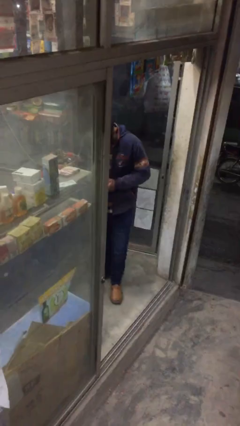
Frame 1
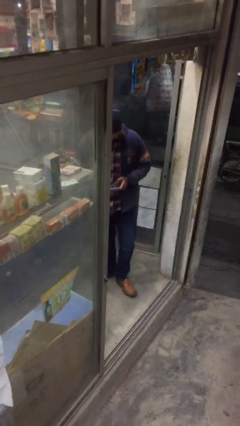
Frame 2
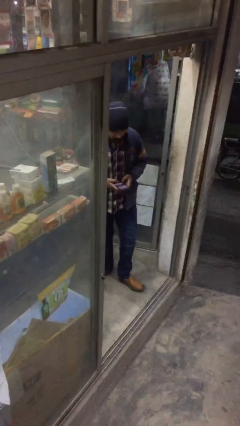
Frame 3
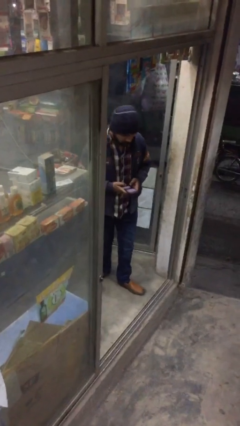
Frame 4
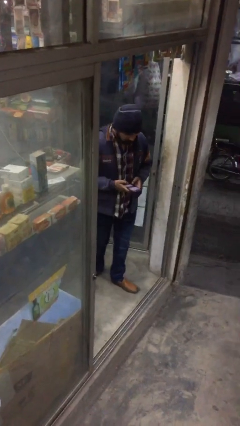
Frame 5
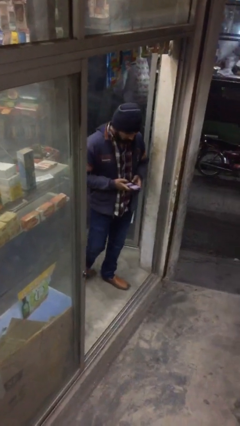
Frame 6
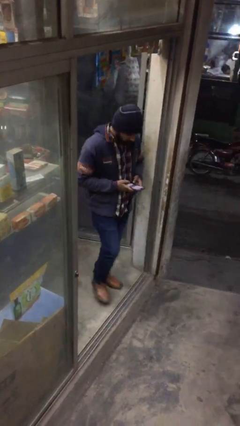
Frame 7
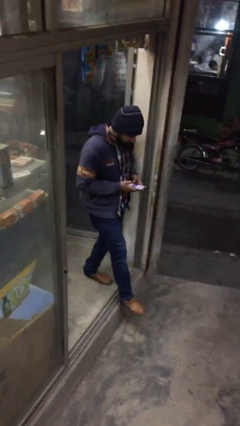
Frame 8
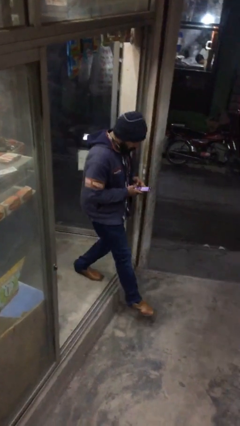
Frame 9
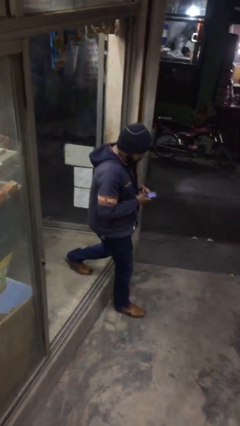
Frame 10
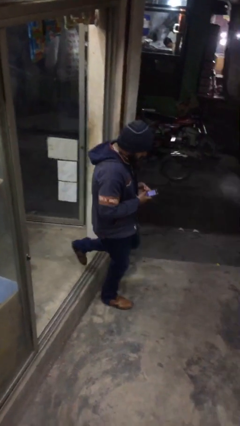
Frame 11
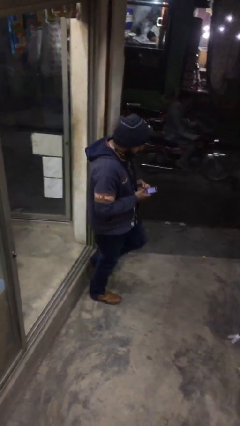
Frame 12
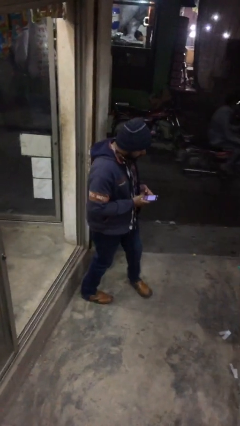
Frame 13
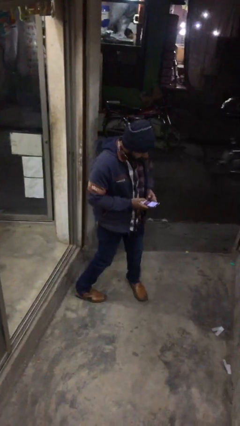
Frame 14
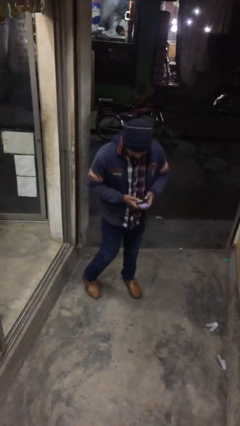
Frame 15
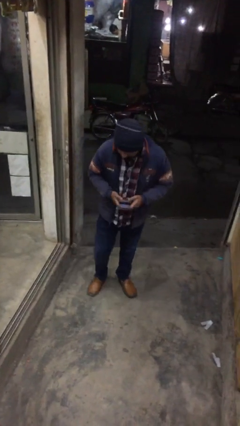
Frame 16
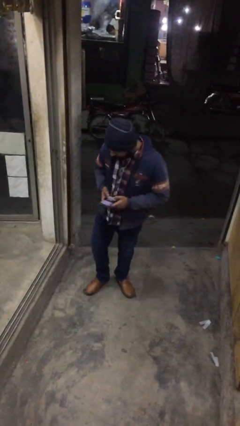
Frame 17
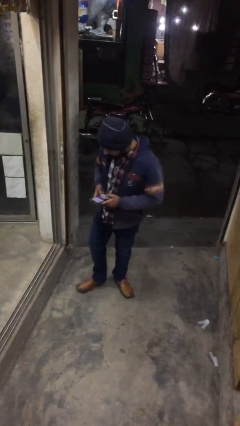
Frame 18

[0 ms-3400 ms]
person exits scene through structure

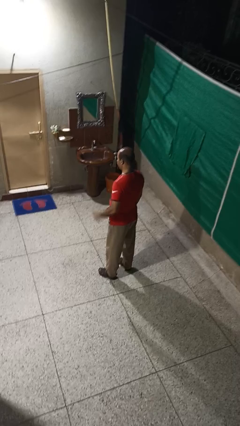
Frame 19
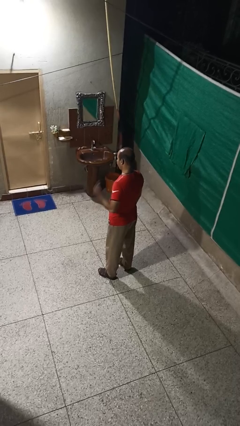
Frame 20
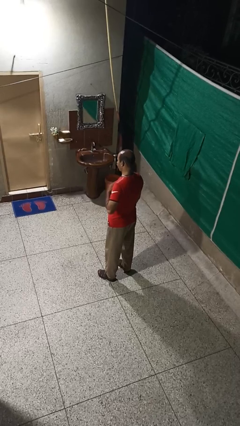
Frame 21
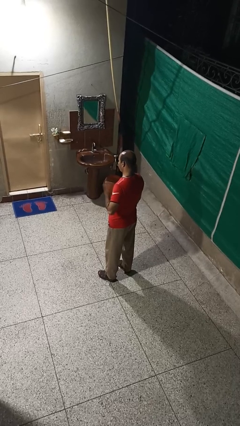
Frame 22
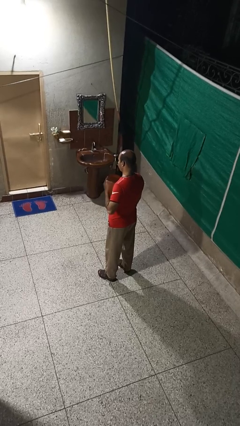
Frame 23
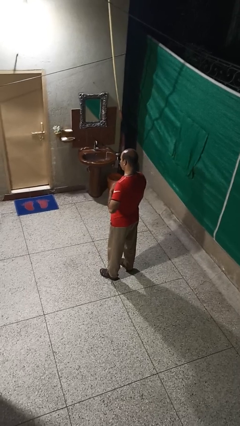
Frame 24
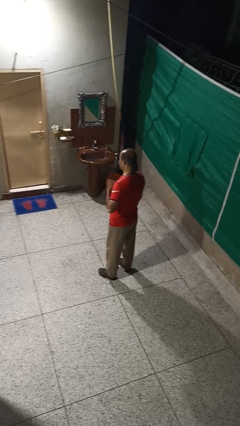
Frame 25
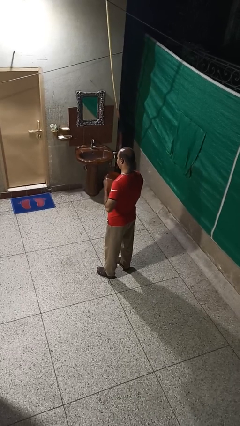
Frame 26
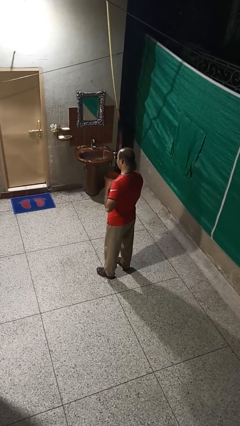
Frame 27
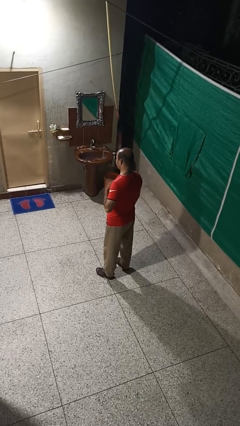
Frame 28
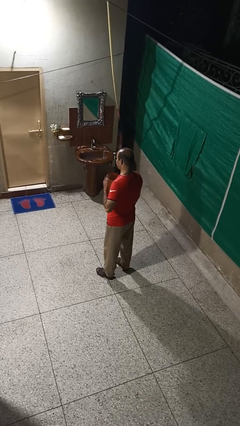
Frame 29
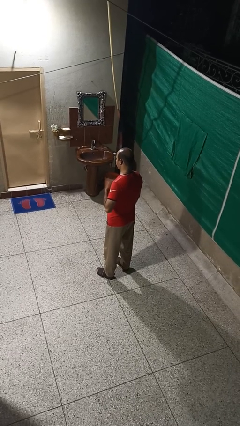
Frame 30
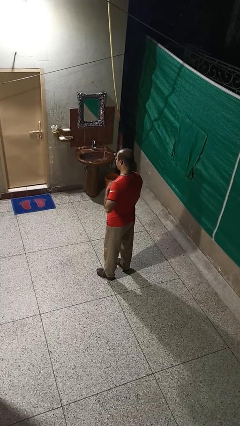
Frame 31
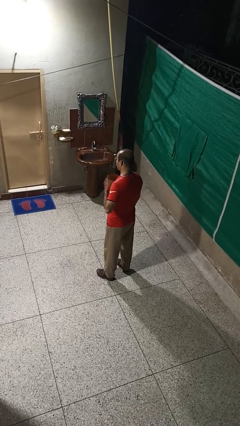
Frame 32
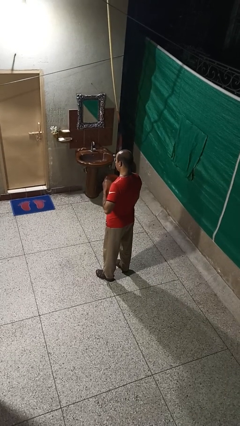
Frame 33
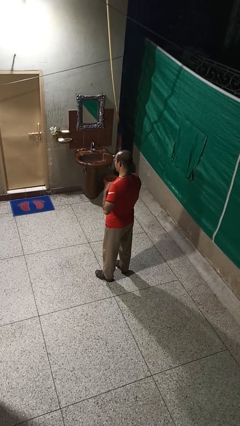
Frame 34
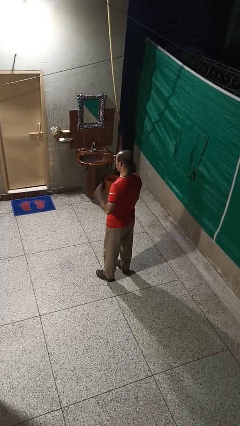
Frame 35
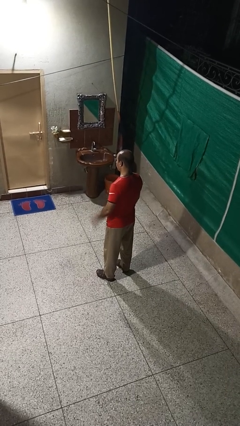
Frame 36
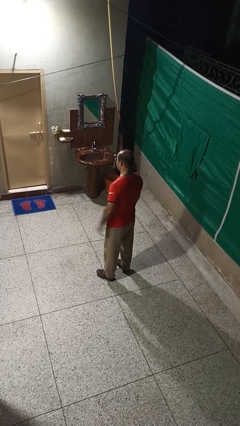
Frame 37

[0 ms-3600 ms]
person drums on chest

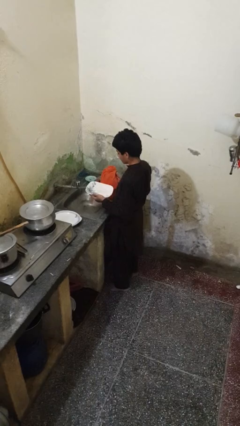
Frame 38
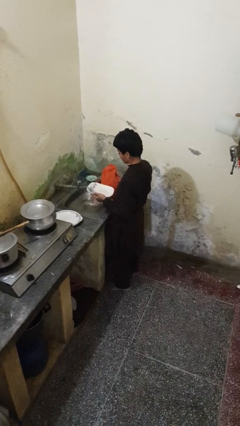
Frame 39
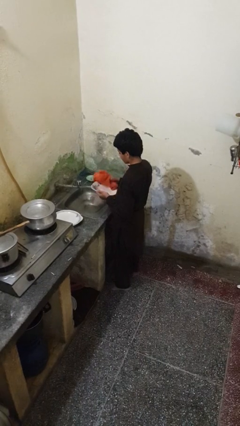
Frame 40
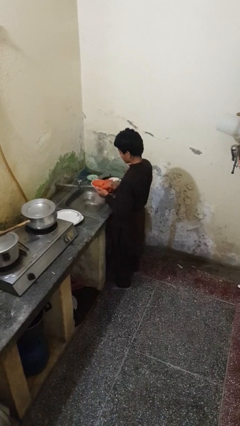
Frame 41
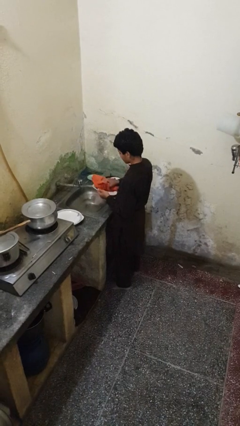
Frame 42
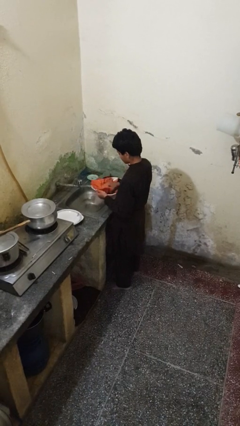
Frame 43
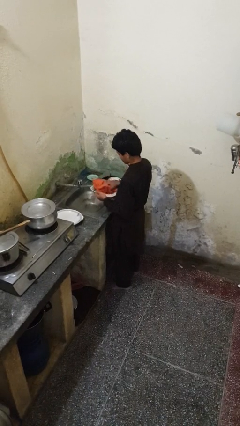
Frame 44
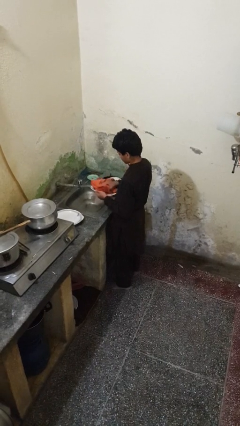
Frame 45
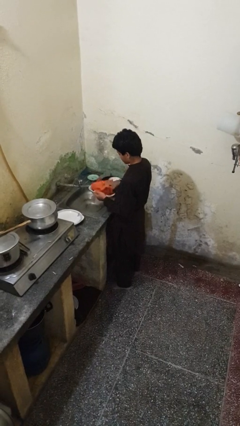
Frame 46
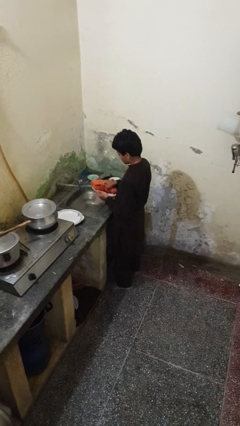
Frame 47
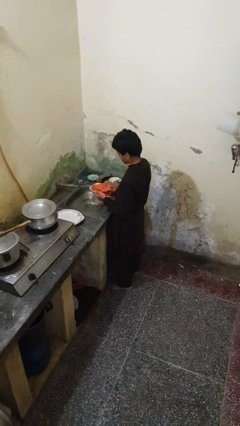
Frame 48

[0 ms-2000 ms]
person dries dish

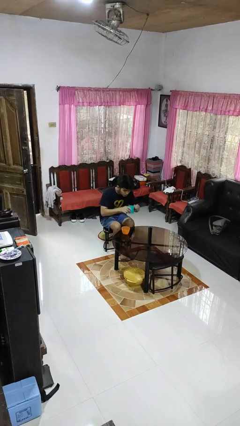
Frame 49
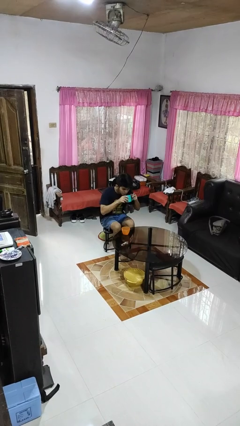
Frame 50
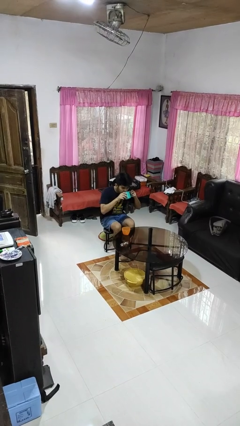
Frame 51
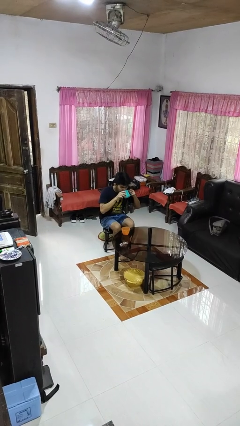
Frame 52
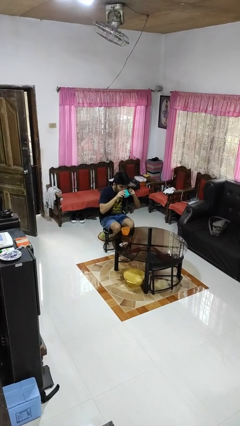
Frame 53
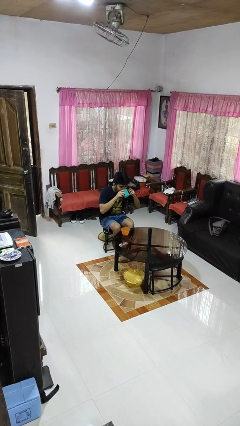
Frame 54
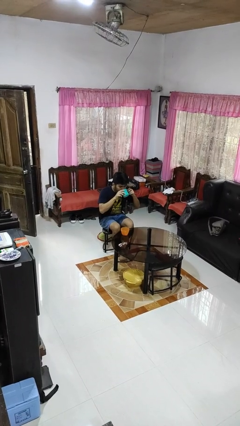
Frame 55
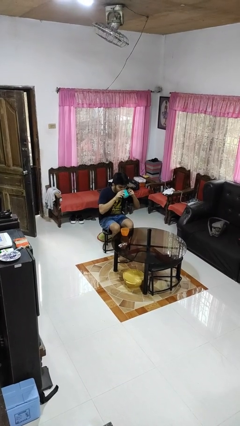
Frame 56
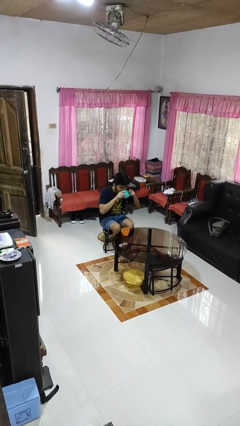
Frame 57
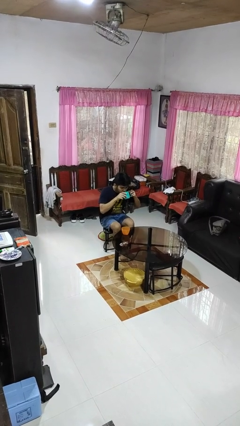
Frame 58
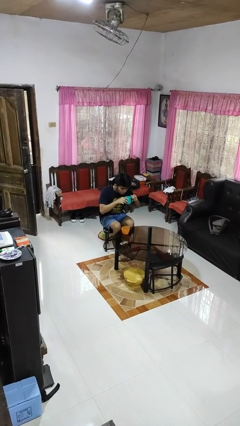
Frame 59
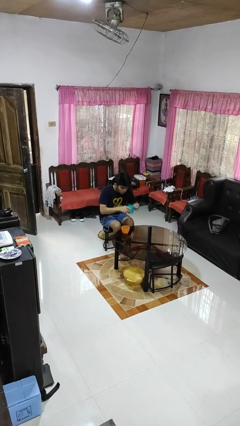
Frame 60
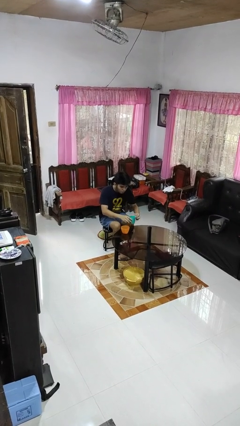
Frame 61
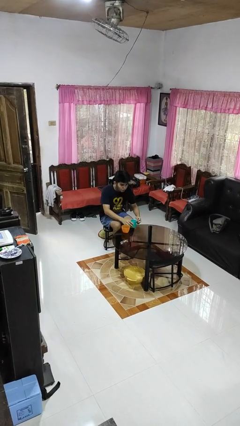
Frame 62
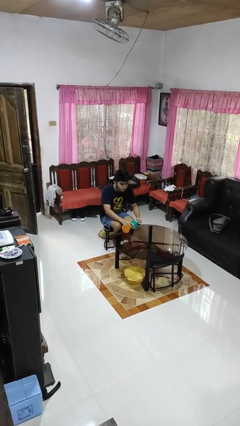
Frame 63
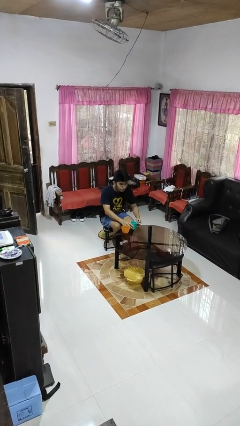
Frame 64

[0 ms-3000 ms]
person drinks from cup

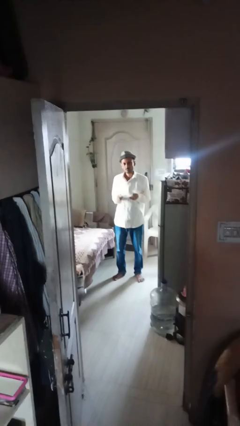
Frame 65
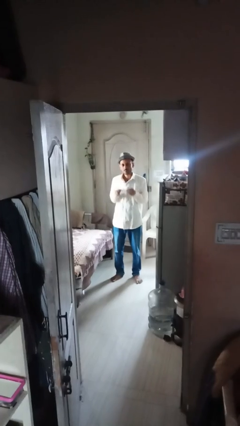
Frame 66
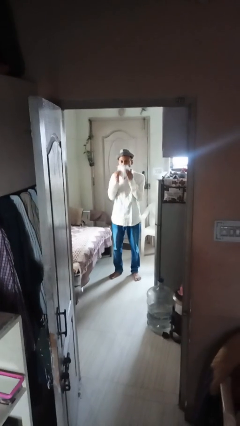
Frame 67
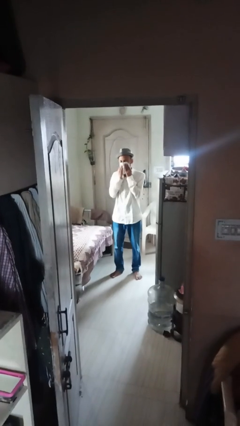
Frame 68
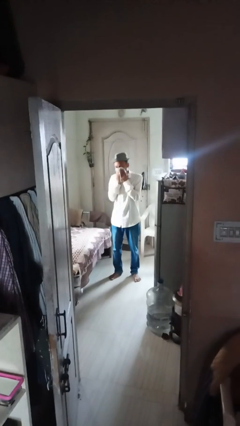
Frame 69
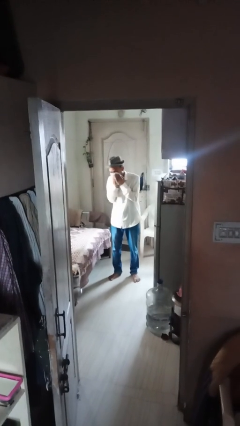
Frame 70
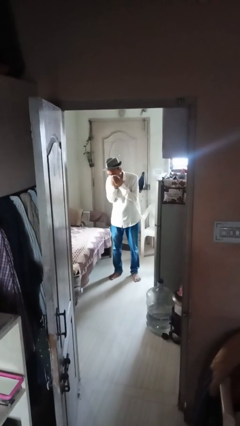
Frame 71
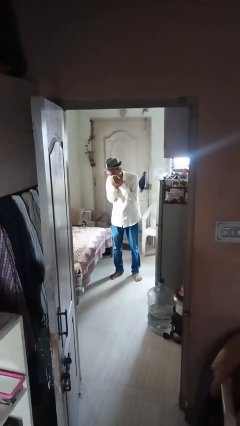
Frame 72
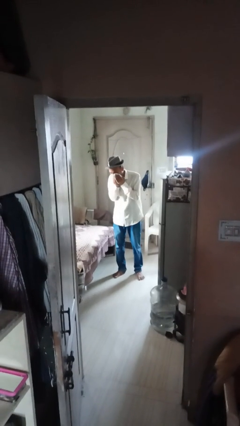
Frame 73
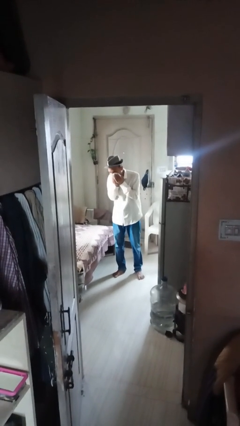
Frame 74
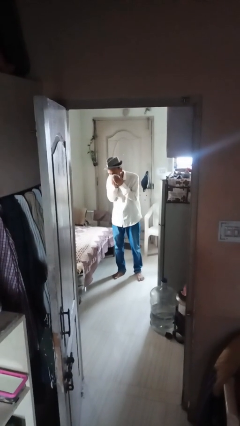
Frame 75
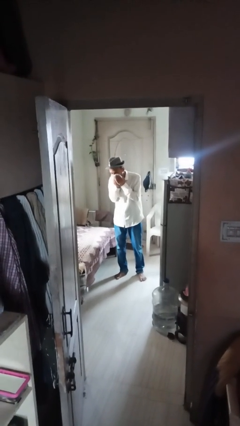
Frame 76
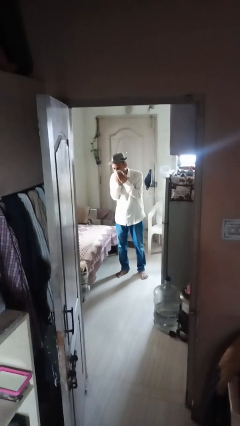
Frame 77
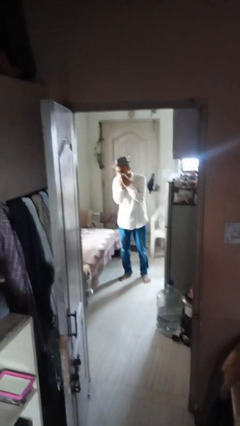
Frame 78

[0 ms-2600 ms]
person blows nose

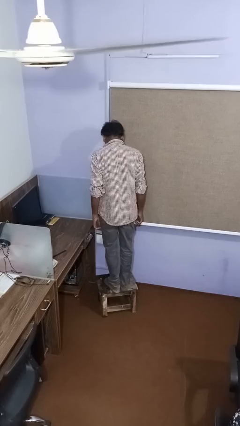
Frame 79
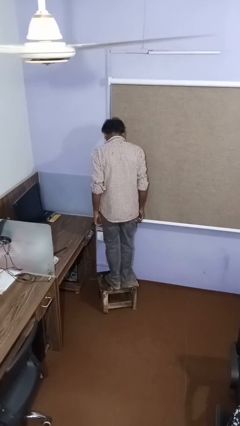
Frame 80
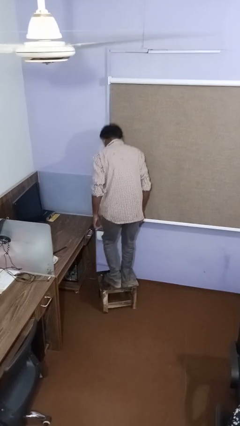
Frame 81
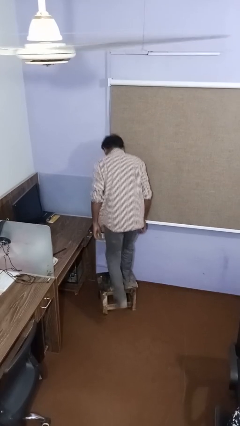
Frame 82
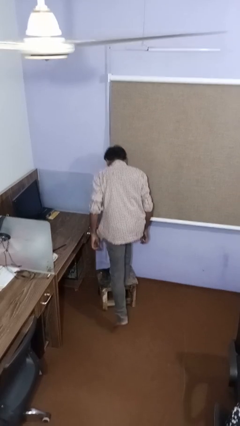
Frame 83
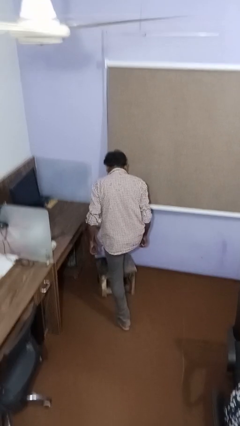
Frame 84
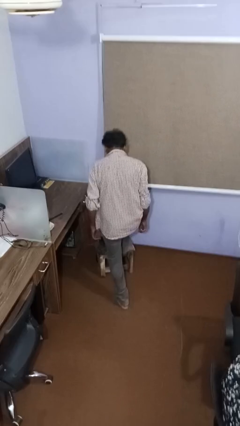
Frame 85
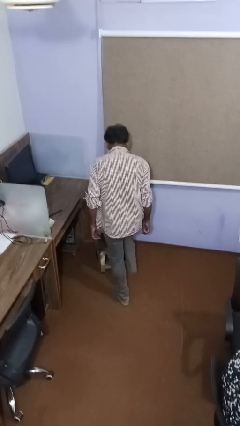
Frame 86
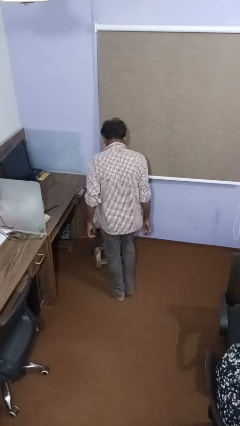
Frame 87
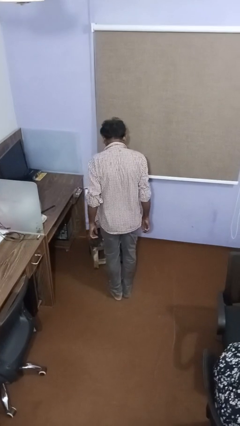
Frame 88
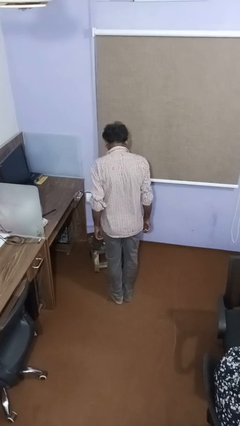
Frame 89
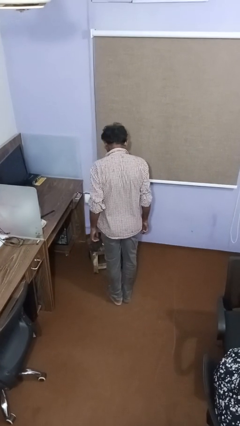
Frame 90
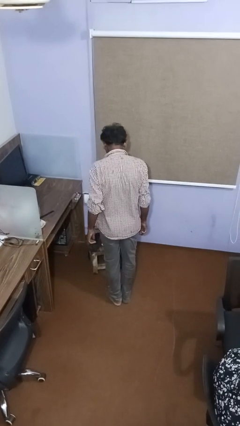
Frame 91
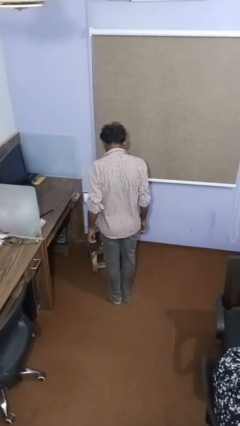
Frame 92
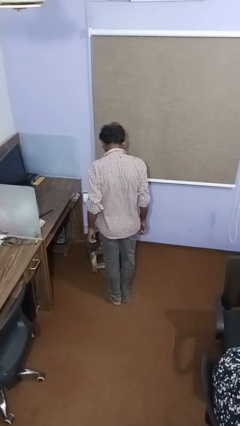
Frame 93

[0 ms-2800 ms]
person climbs off table
